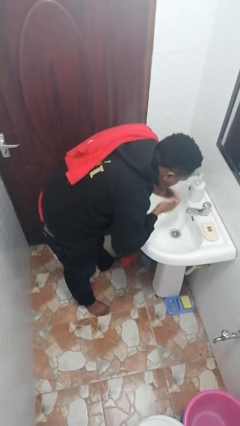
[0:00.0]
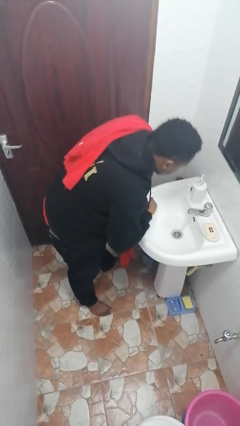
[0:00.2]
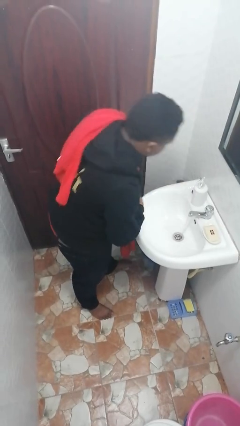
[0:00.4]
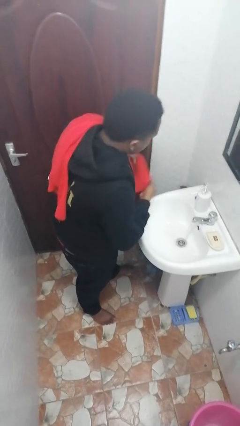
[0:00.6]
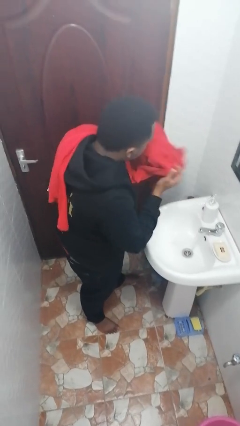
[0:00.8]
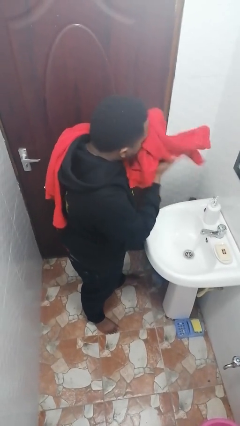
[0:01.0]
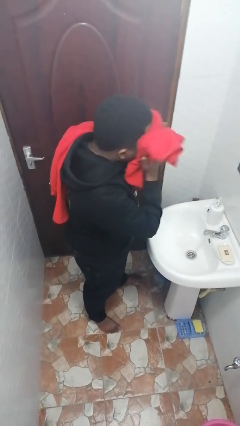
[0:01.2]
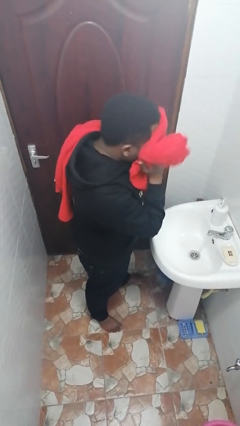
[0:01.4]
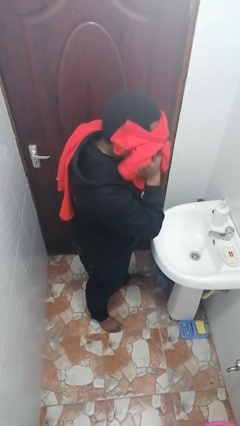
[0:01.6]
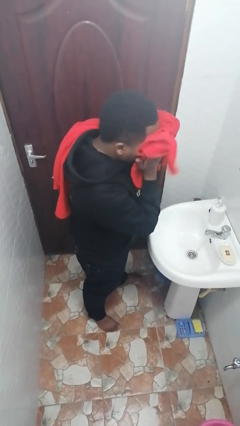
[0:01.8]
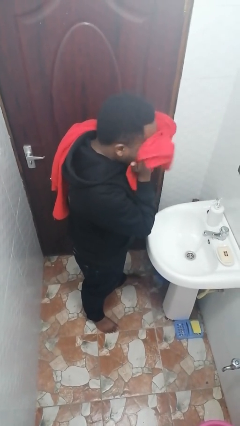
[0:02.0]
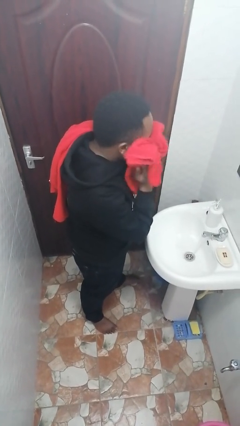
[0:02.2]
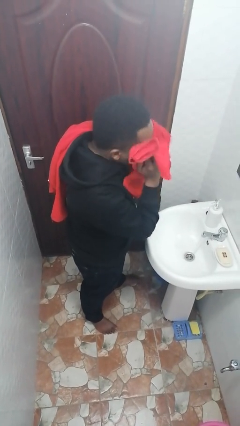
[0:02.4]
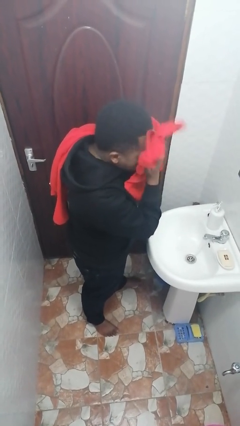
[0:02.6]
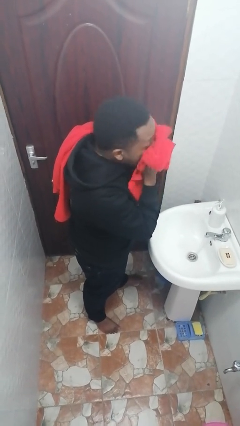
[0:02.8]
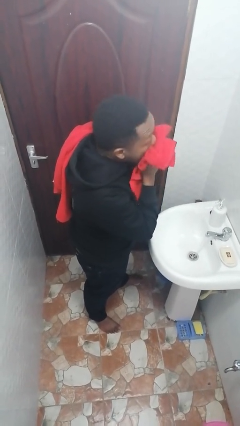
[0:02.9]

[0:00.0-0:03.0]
person dries face with towel

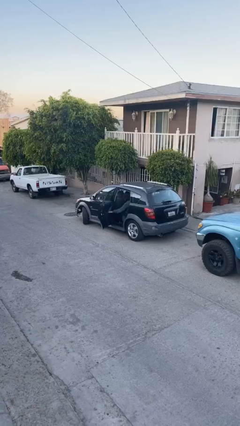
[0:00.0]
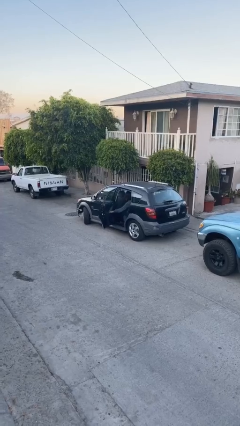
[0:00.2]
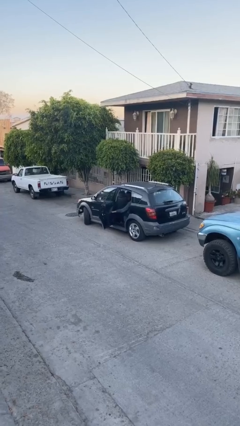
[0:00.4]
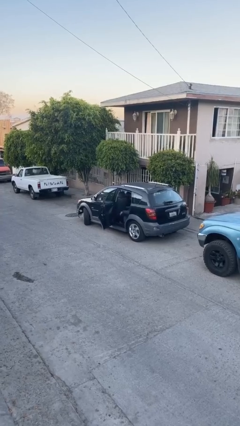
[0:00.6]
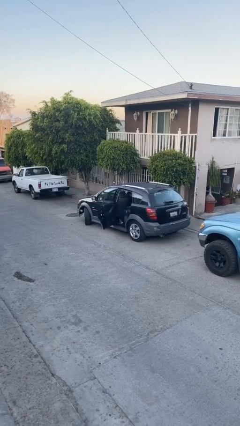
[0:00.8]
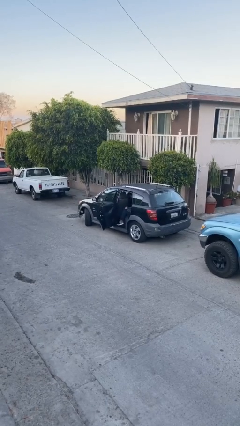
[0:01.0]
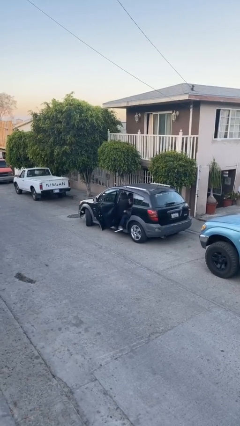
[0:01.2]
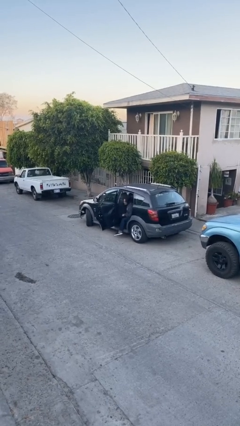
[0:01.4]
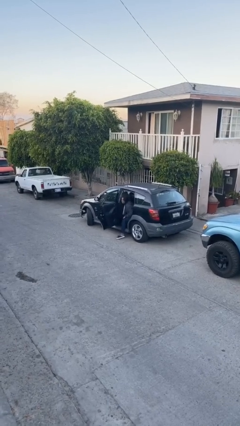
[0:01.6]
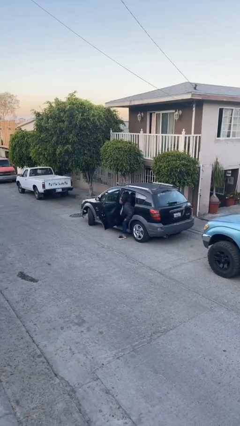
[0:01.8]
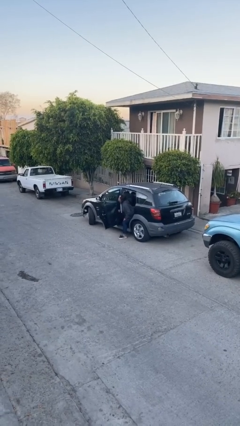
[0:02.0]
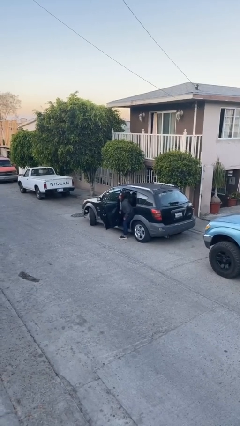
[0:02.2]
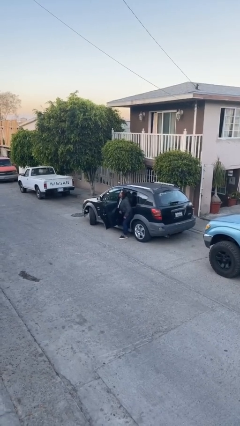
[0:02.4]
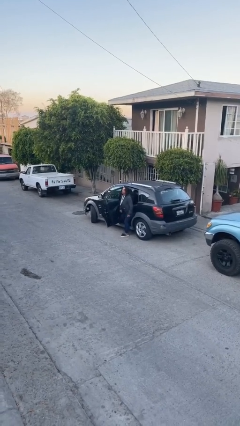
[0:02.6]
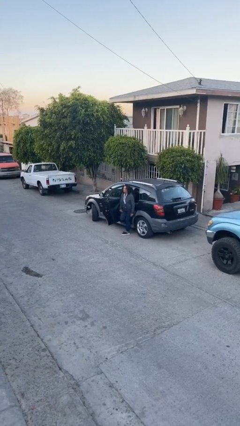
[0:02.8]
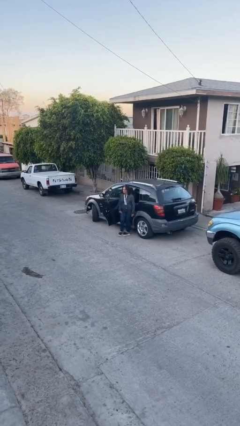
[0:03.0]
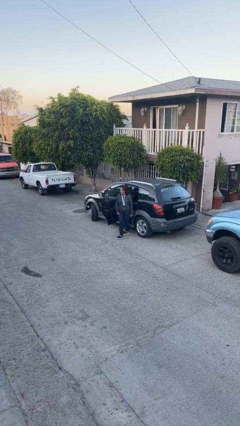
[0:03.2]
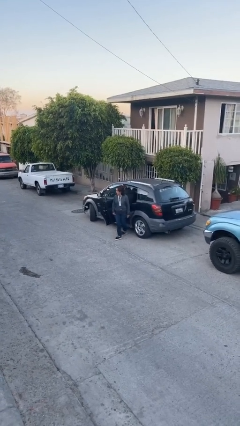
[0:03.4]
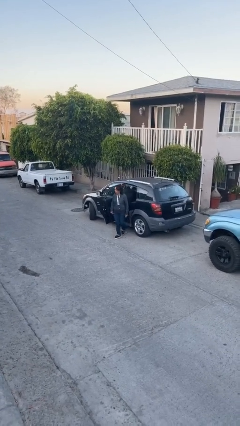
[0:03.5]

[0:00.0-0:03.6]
person exits car

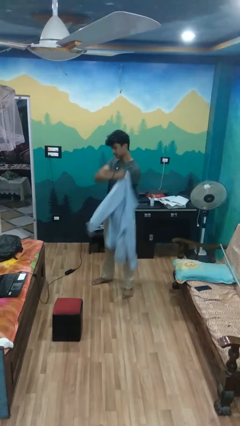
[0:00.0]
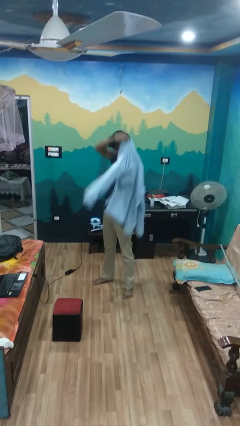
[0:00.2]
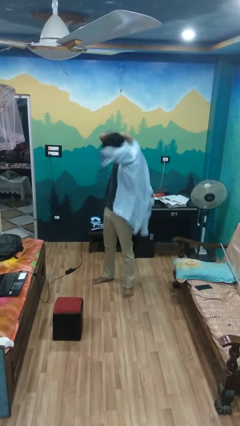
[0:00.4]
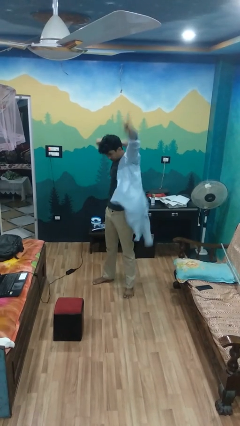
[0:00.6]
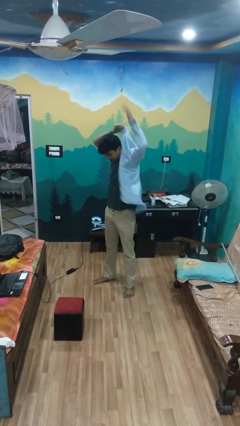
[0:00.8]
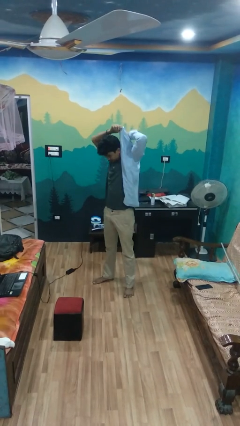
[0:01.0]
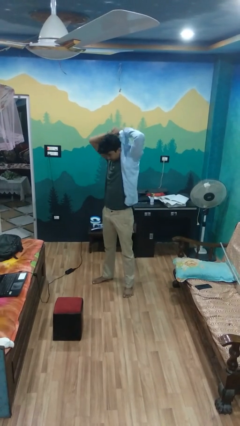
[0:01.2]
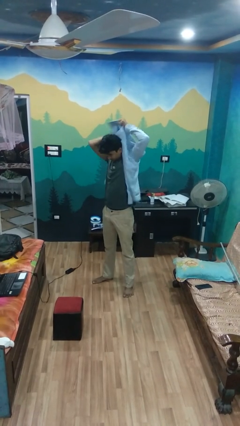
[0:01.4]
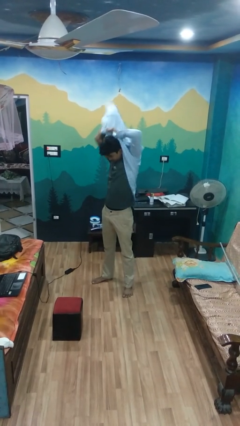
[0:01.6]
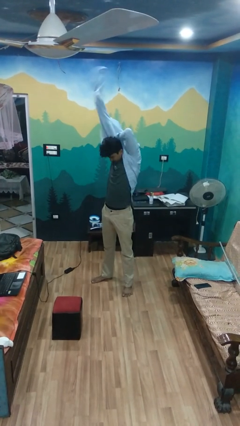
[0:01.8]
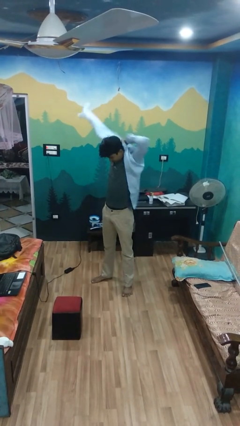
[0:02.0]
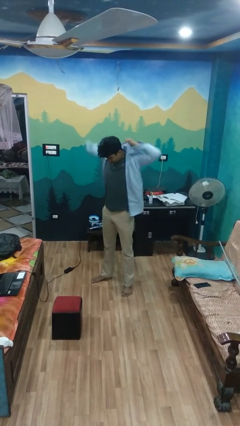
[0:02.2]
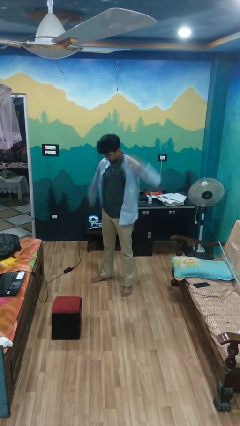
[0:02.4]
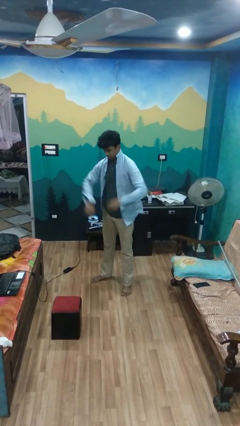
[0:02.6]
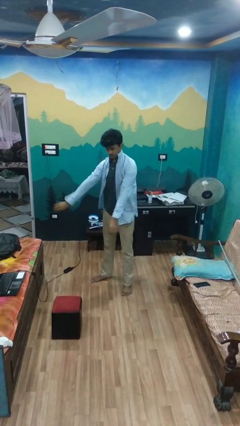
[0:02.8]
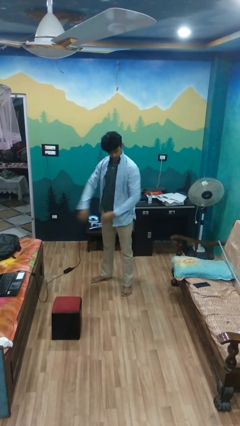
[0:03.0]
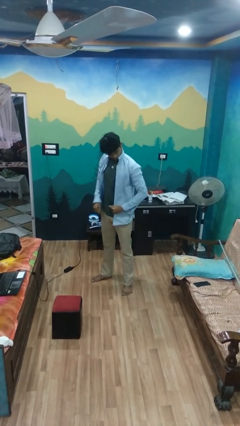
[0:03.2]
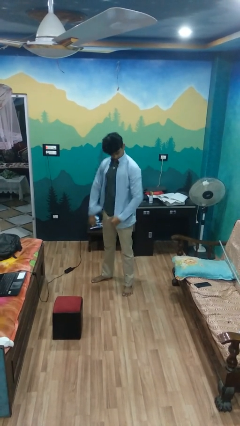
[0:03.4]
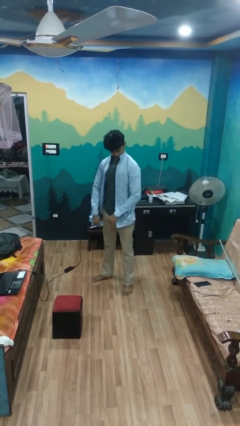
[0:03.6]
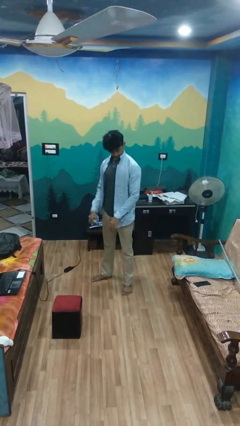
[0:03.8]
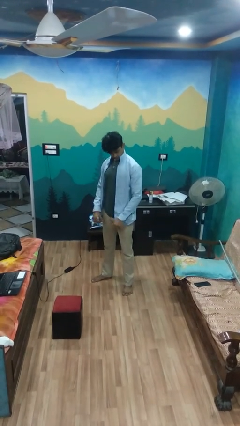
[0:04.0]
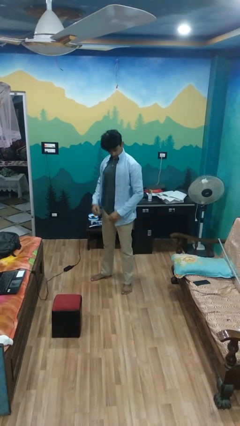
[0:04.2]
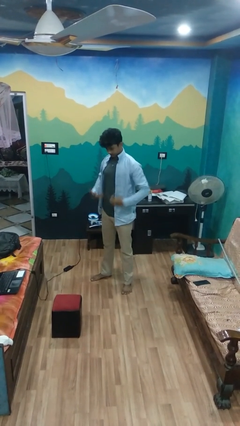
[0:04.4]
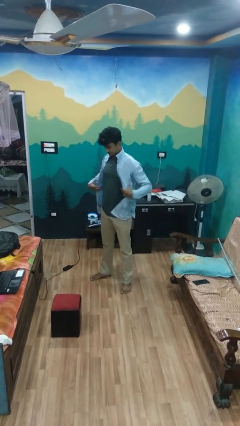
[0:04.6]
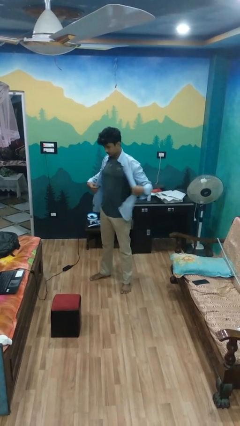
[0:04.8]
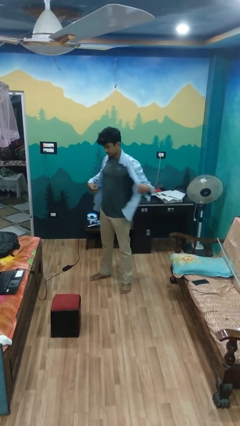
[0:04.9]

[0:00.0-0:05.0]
person puts on shirt

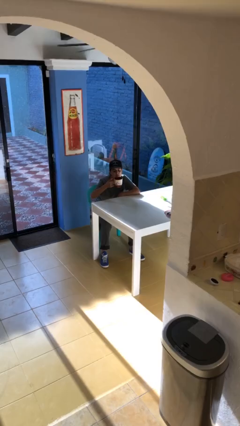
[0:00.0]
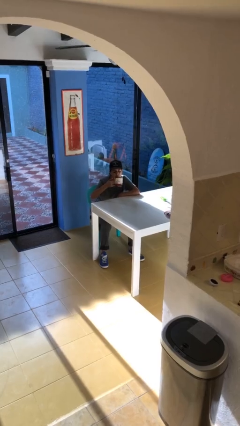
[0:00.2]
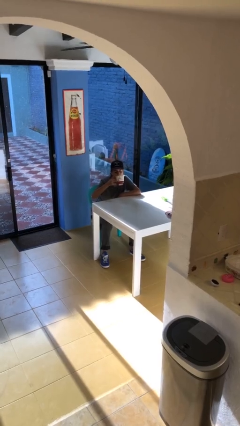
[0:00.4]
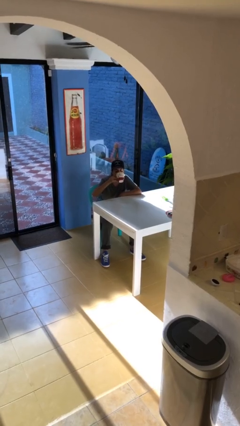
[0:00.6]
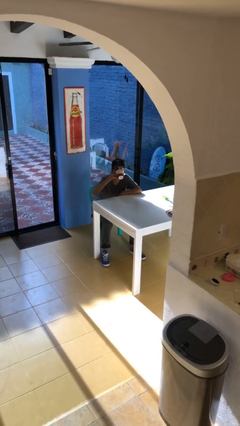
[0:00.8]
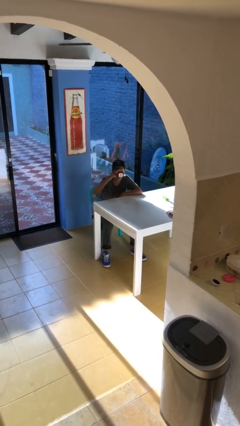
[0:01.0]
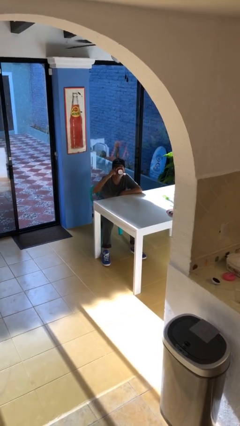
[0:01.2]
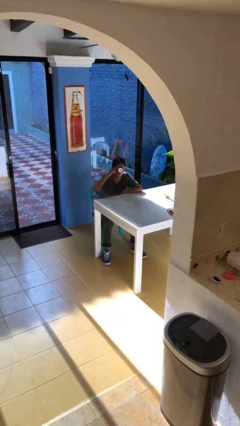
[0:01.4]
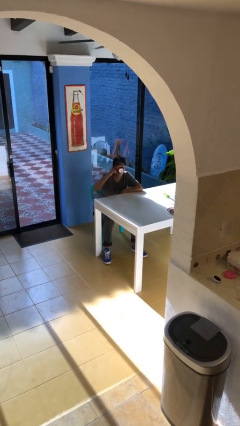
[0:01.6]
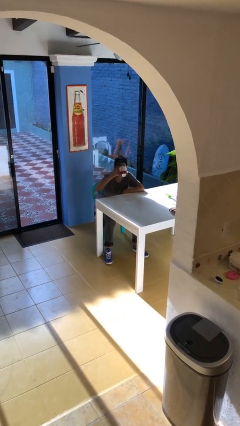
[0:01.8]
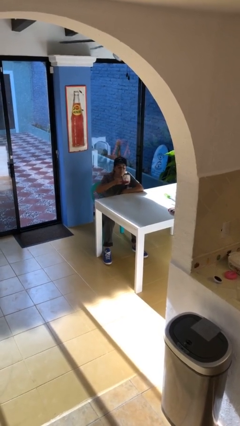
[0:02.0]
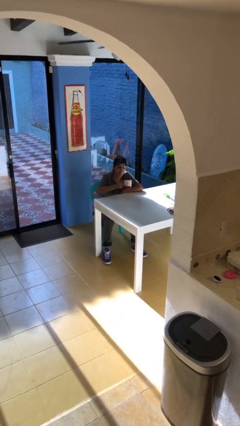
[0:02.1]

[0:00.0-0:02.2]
person drinks from mug

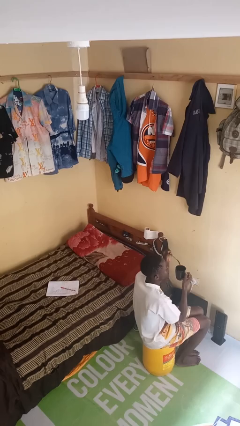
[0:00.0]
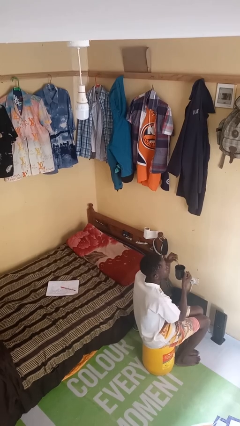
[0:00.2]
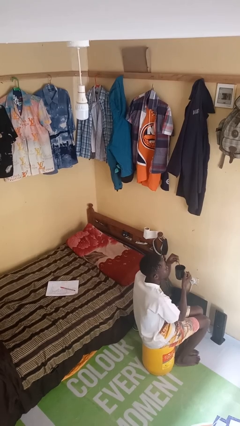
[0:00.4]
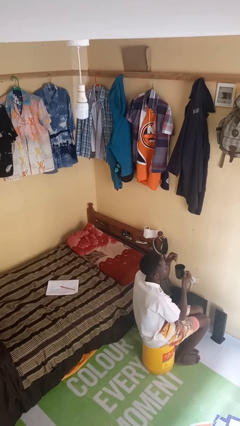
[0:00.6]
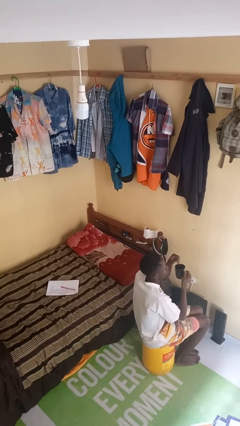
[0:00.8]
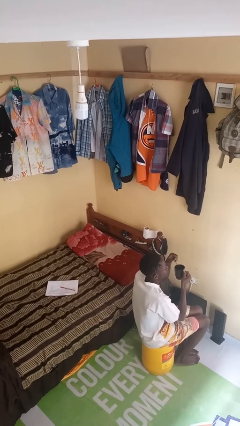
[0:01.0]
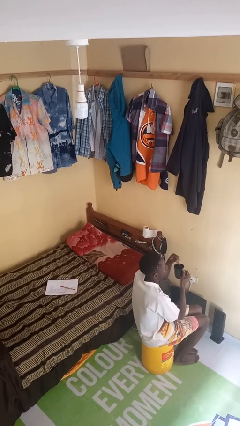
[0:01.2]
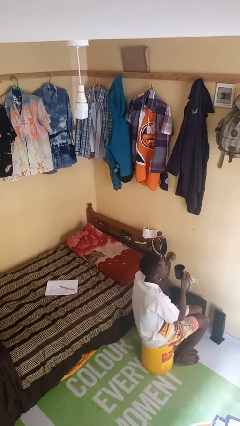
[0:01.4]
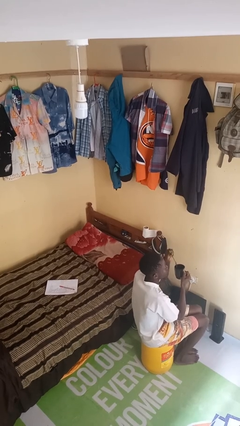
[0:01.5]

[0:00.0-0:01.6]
person stirs mug

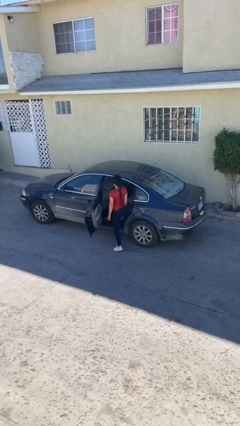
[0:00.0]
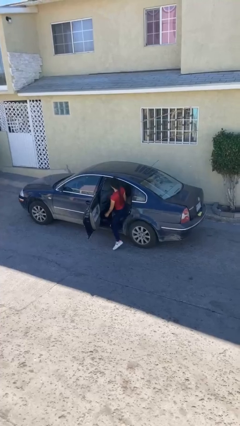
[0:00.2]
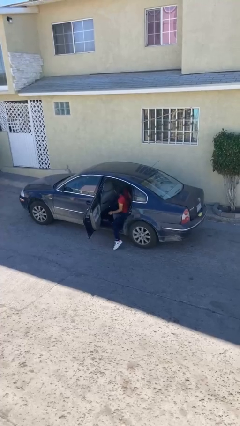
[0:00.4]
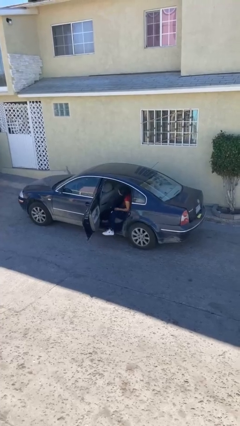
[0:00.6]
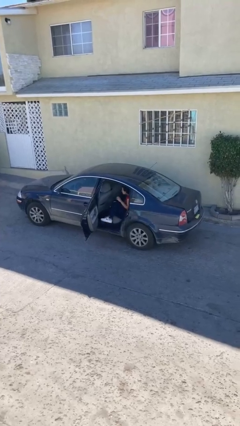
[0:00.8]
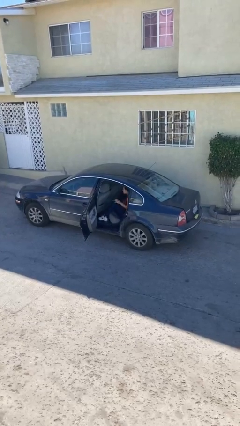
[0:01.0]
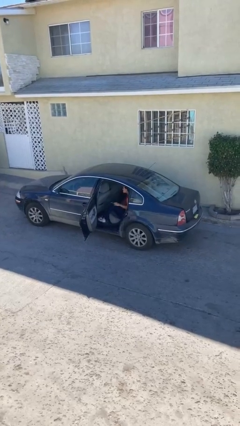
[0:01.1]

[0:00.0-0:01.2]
person enters car

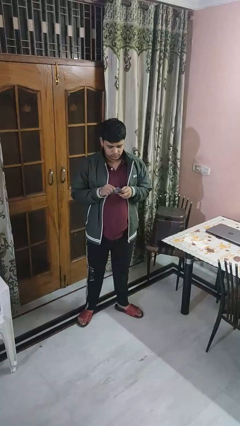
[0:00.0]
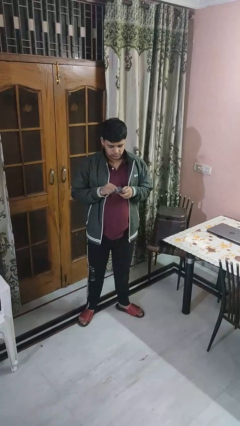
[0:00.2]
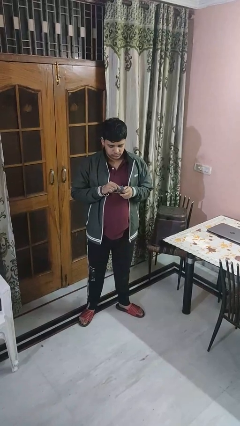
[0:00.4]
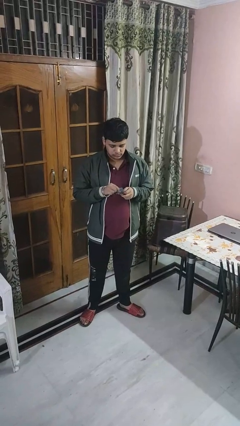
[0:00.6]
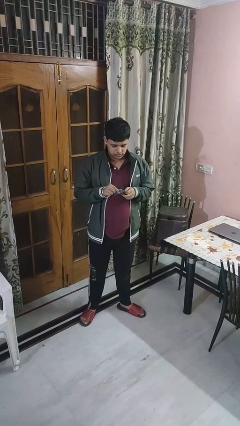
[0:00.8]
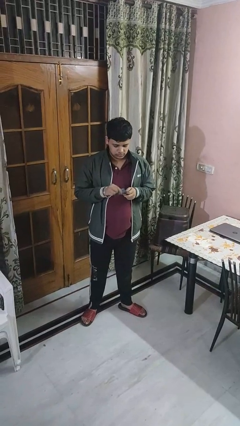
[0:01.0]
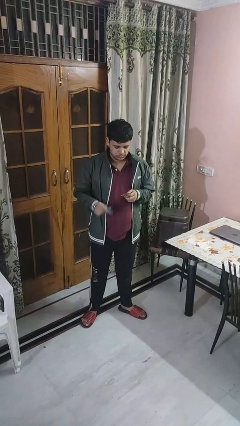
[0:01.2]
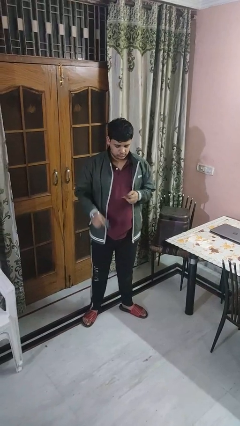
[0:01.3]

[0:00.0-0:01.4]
person cleans eyeglasses
